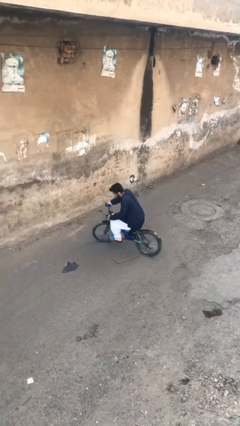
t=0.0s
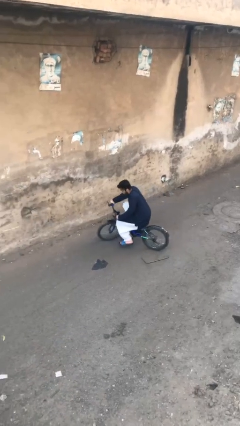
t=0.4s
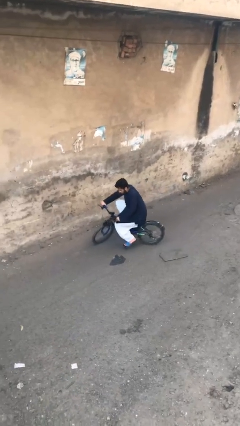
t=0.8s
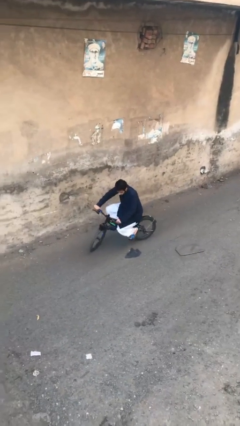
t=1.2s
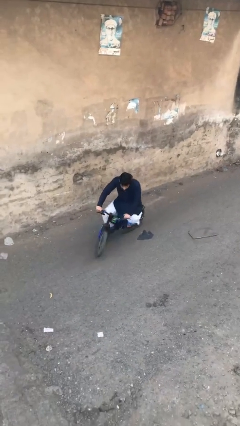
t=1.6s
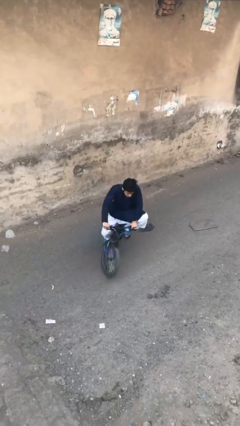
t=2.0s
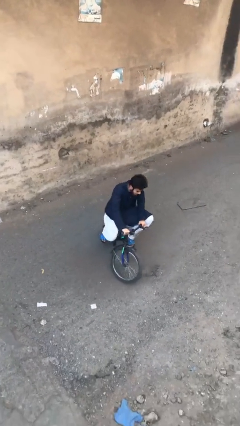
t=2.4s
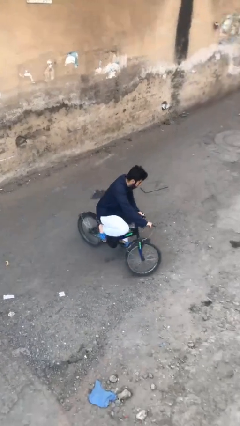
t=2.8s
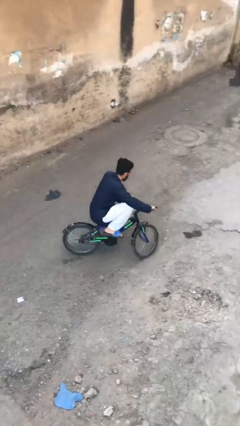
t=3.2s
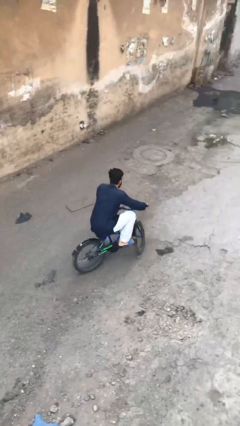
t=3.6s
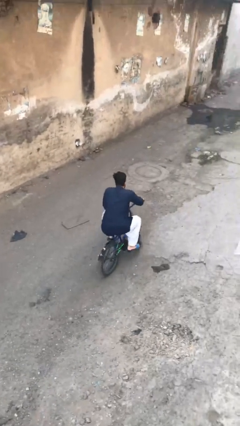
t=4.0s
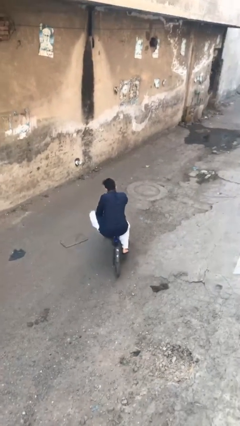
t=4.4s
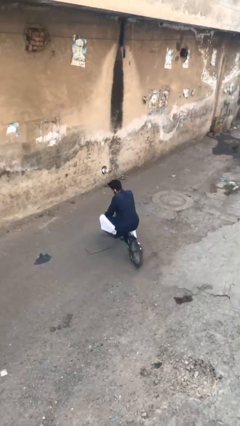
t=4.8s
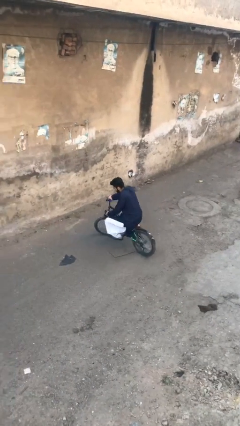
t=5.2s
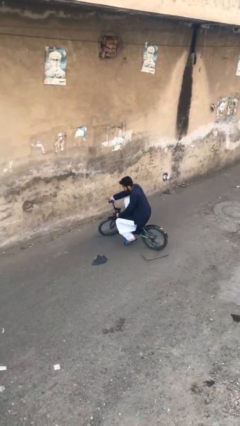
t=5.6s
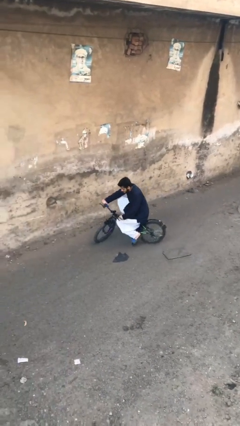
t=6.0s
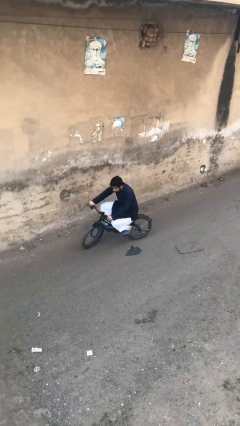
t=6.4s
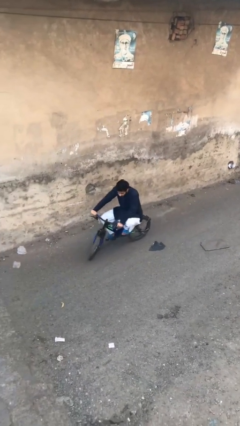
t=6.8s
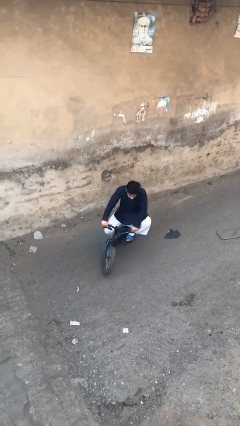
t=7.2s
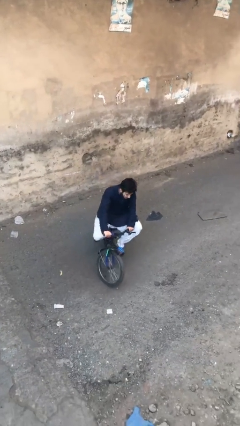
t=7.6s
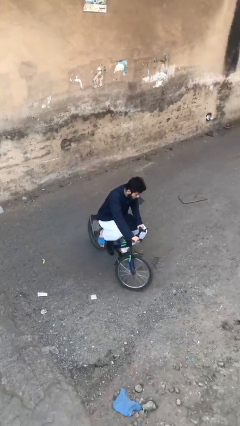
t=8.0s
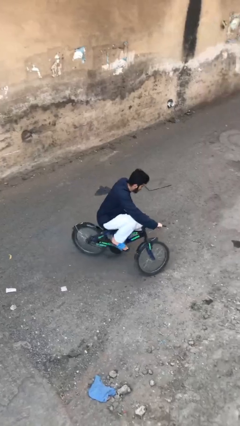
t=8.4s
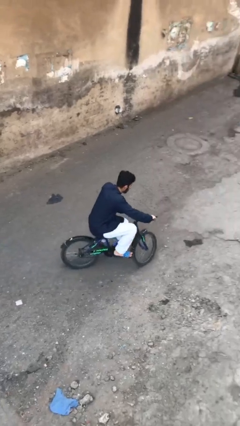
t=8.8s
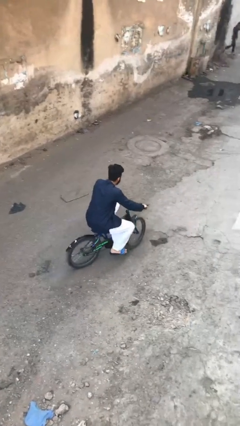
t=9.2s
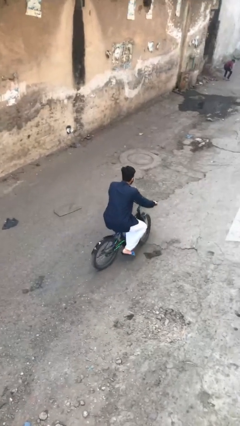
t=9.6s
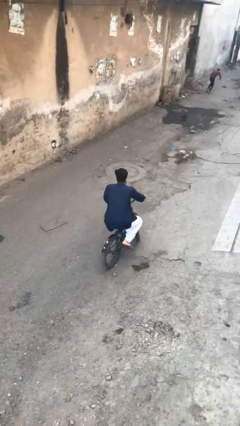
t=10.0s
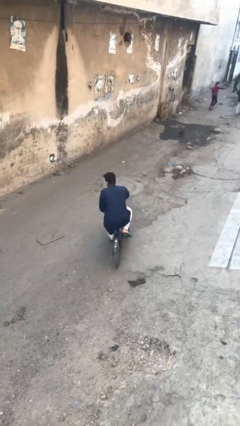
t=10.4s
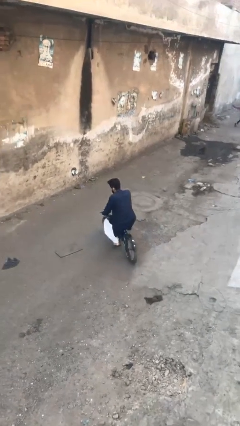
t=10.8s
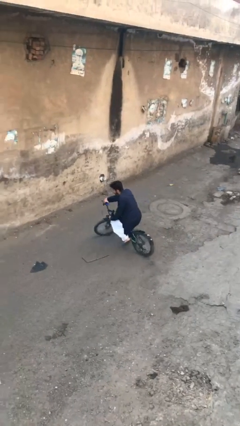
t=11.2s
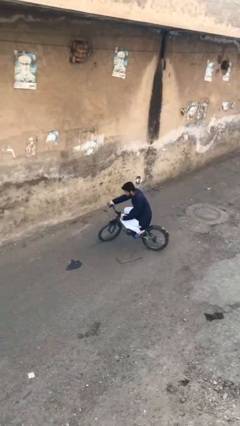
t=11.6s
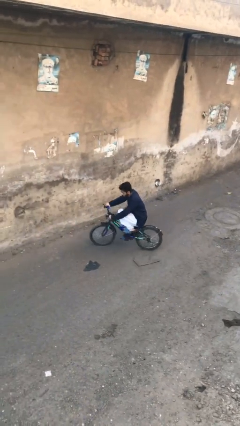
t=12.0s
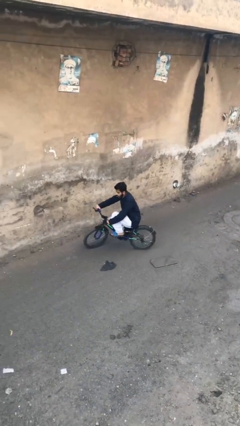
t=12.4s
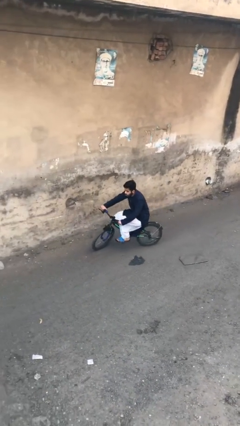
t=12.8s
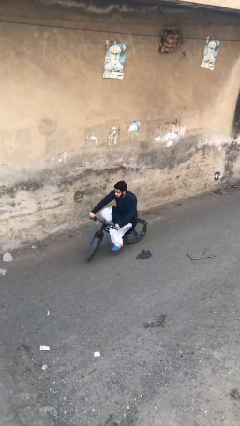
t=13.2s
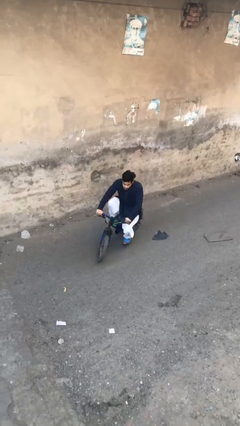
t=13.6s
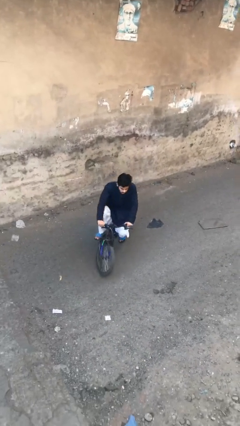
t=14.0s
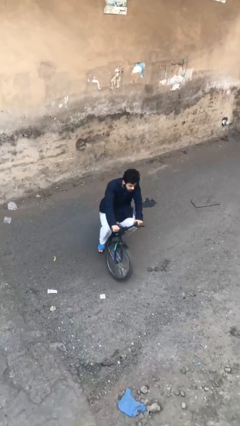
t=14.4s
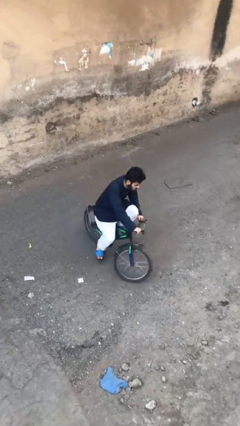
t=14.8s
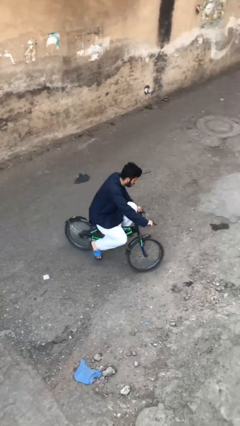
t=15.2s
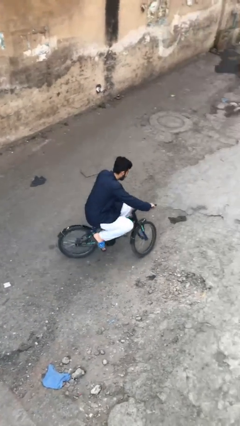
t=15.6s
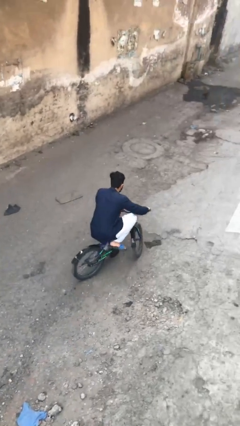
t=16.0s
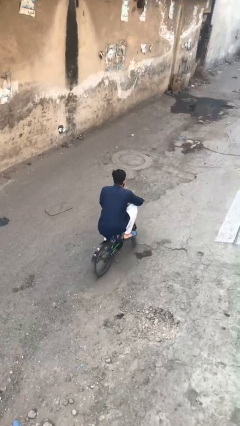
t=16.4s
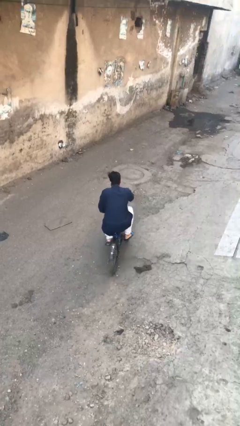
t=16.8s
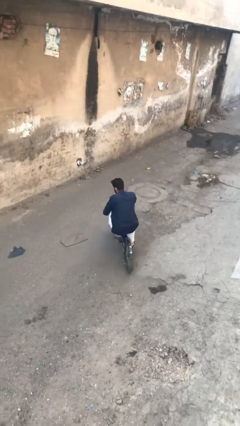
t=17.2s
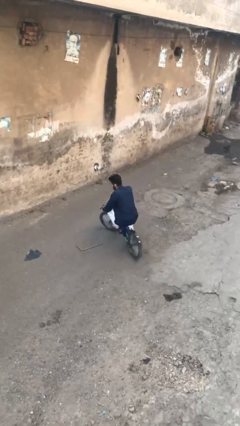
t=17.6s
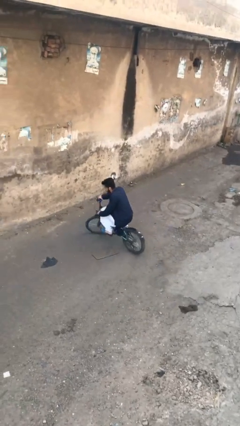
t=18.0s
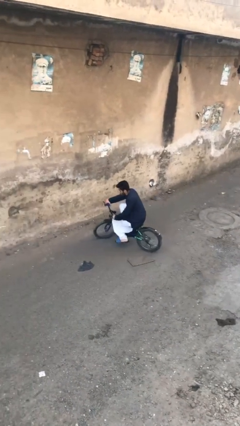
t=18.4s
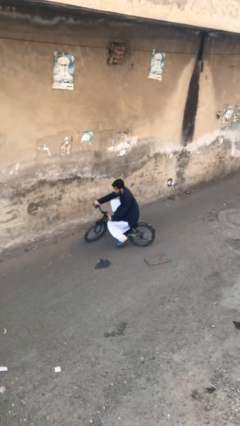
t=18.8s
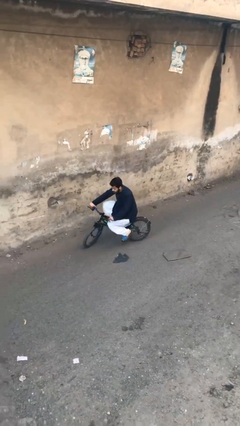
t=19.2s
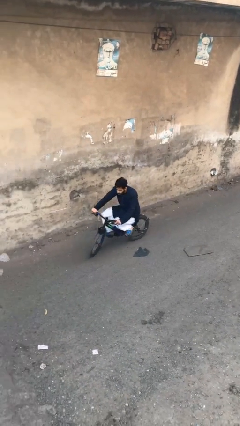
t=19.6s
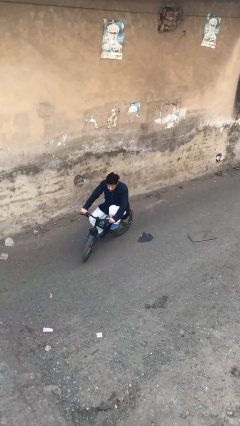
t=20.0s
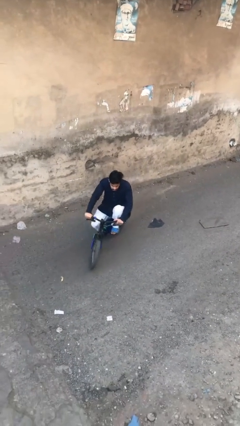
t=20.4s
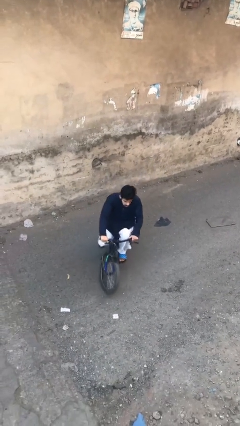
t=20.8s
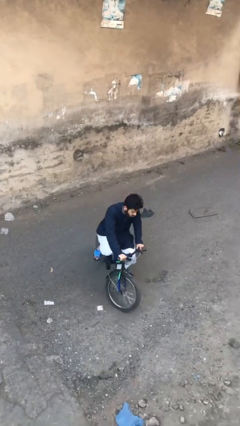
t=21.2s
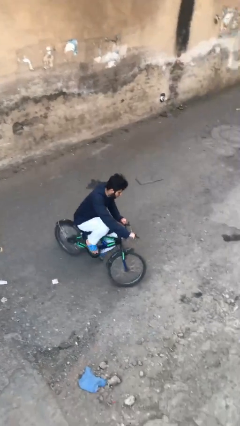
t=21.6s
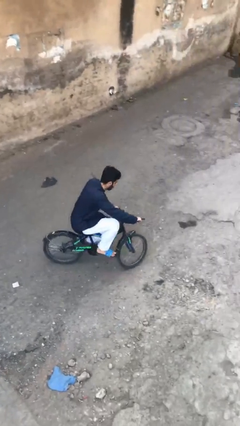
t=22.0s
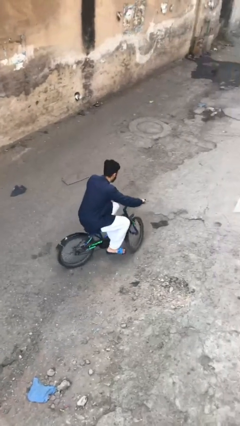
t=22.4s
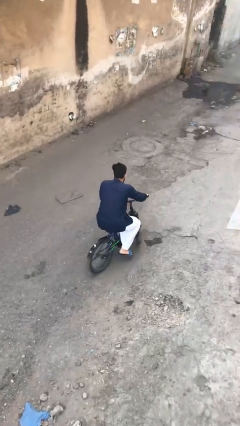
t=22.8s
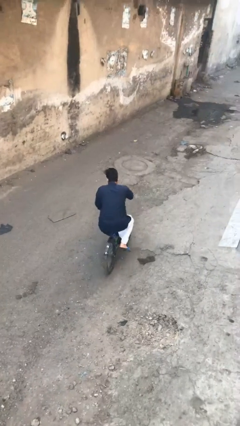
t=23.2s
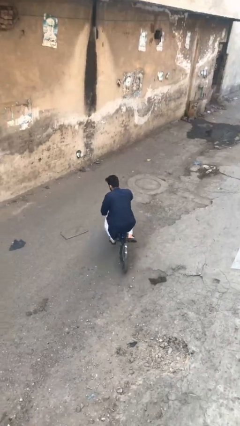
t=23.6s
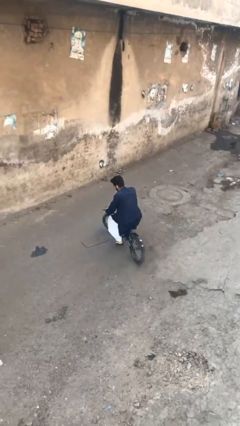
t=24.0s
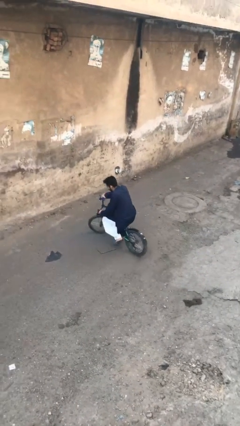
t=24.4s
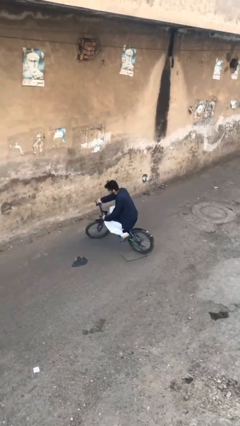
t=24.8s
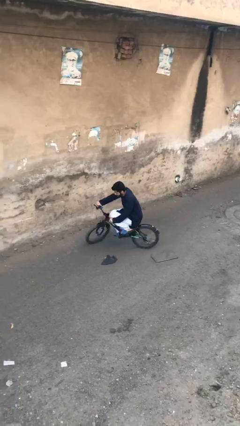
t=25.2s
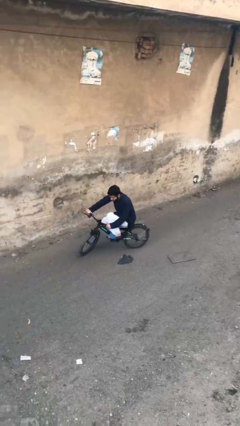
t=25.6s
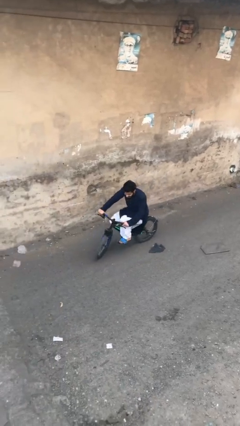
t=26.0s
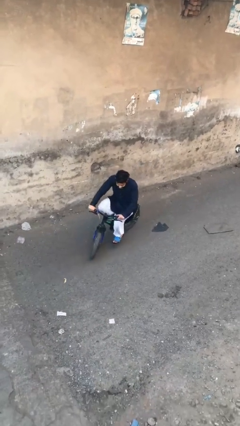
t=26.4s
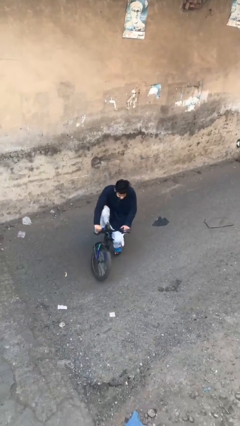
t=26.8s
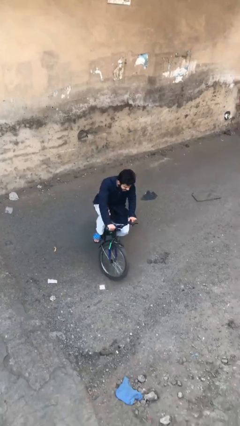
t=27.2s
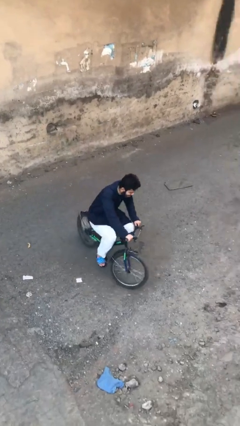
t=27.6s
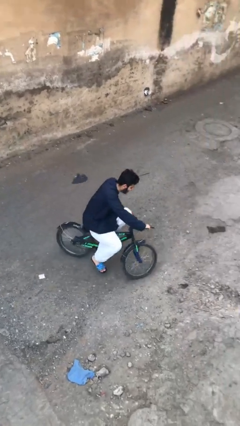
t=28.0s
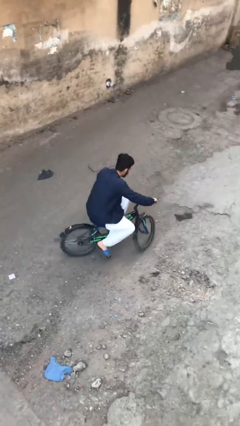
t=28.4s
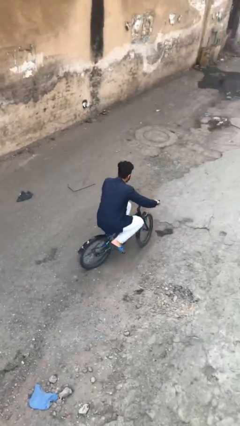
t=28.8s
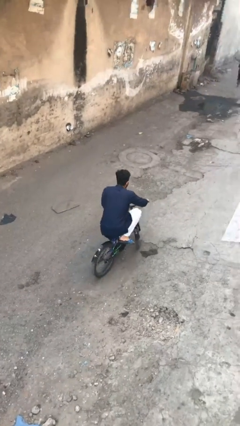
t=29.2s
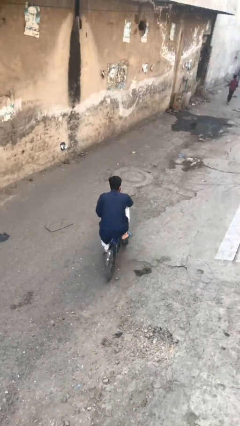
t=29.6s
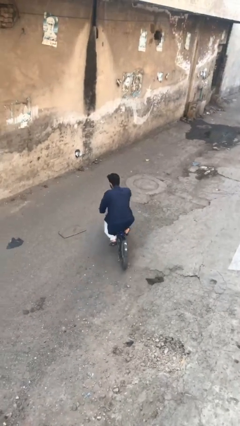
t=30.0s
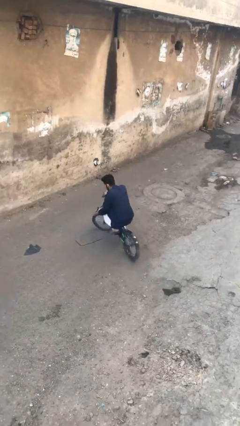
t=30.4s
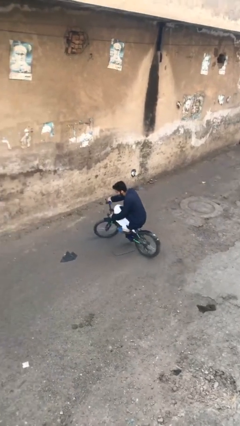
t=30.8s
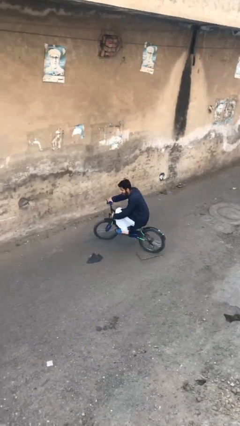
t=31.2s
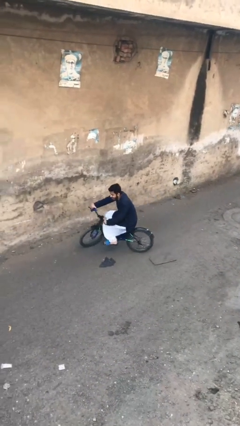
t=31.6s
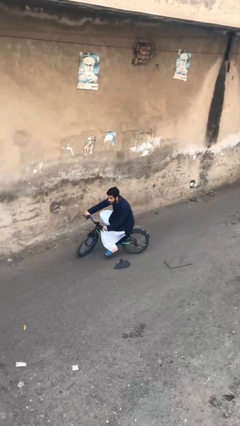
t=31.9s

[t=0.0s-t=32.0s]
person rides bicycle
